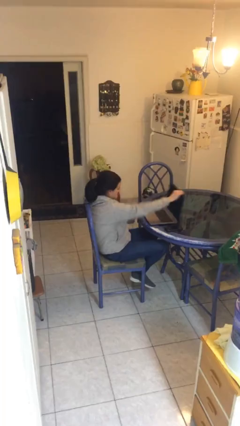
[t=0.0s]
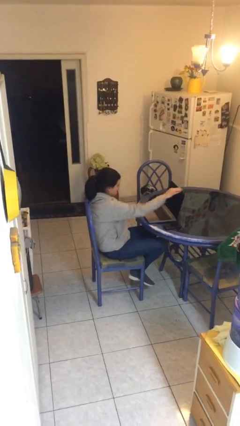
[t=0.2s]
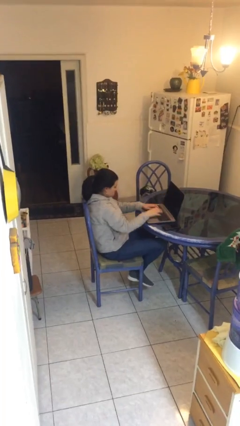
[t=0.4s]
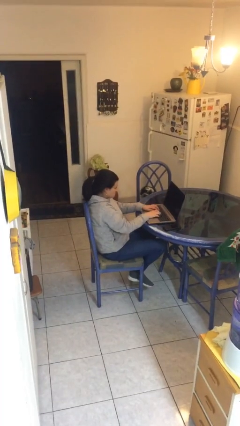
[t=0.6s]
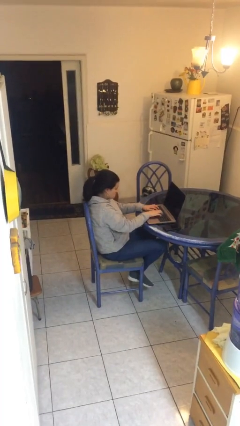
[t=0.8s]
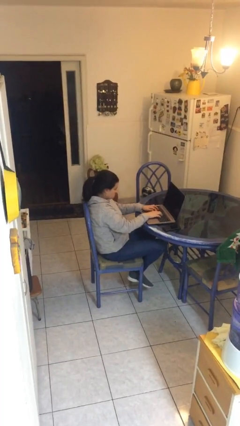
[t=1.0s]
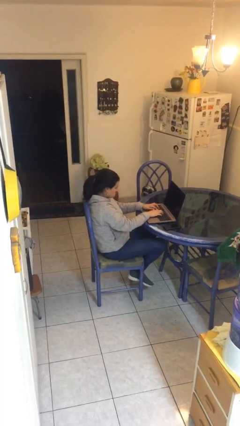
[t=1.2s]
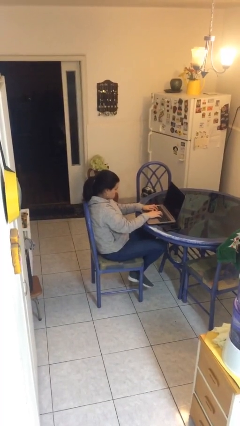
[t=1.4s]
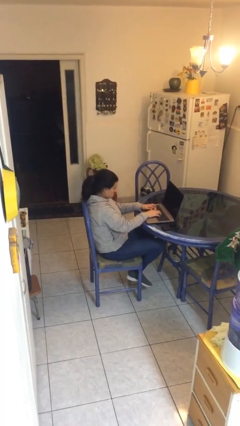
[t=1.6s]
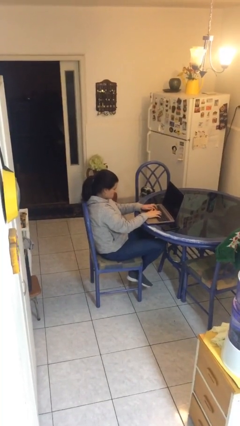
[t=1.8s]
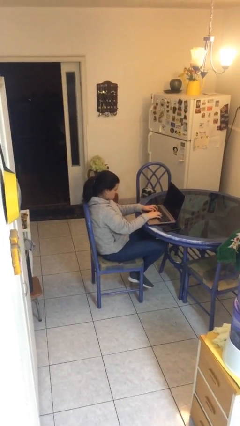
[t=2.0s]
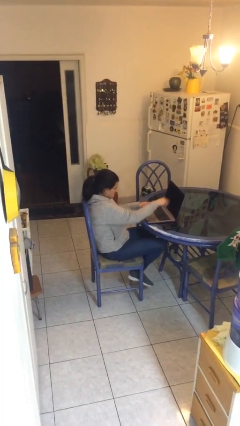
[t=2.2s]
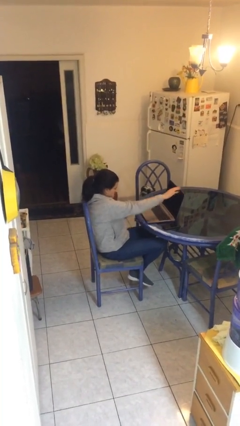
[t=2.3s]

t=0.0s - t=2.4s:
person interacts with laptop

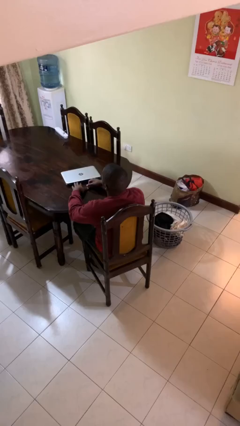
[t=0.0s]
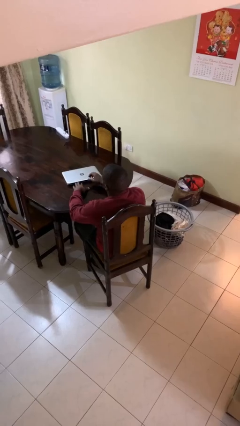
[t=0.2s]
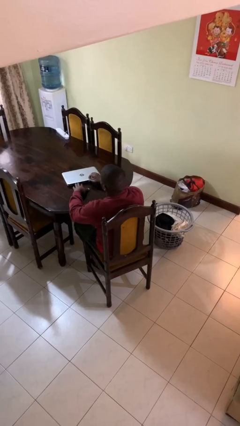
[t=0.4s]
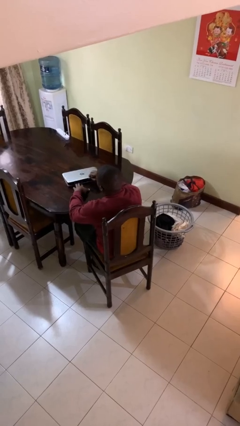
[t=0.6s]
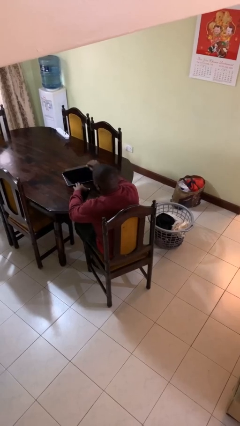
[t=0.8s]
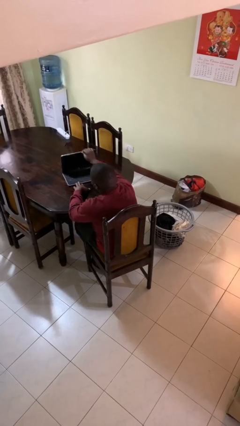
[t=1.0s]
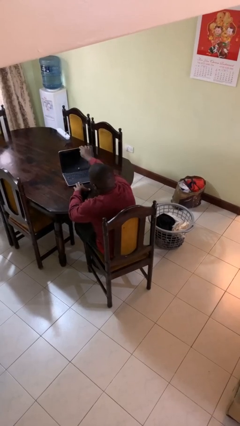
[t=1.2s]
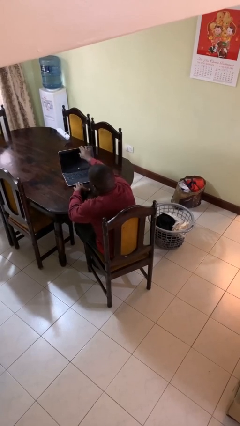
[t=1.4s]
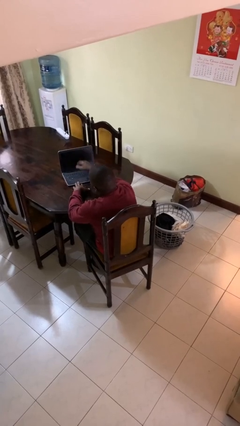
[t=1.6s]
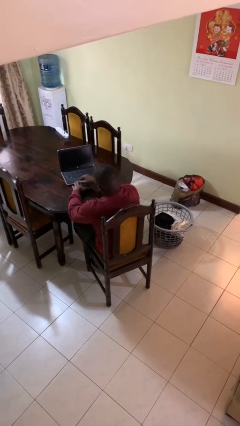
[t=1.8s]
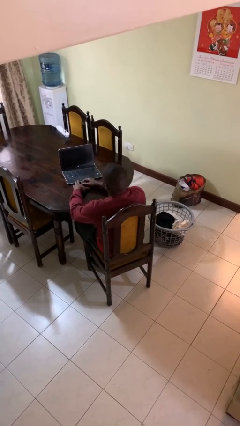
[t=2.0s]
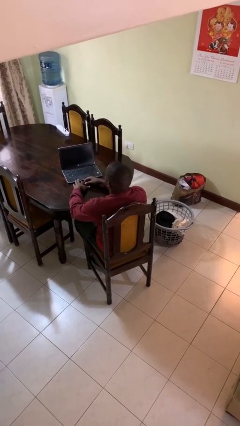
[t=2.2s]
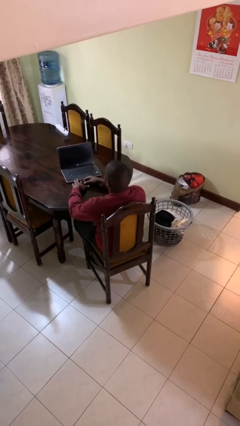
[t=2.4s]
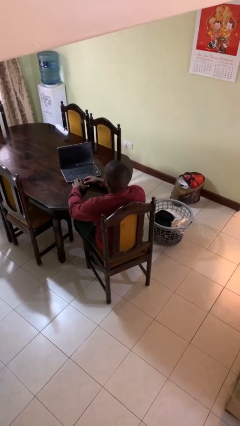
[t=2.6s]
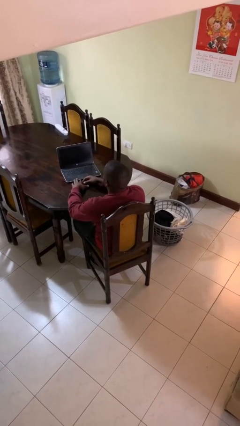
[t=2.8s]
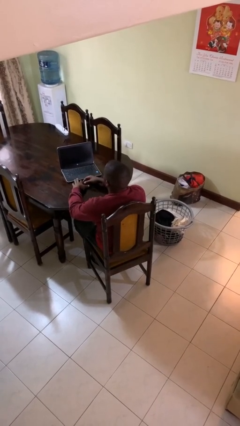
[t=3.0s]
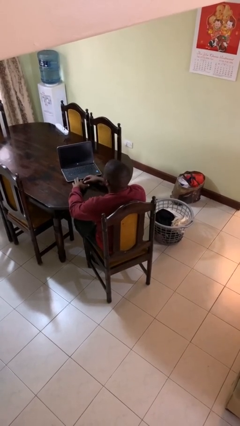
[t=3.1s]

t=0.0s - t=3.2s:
person opens laptop

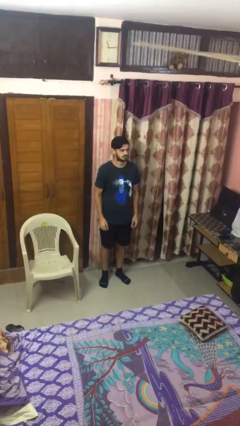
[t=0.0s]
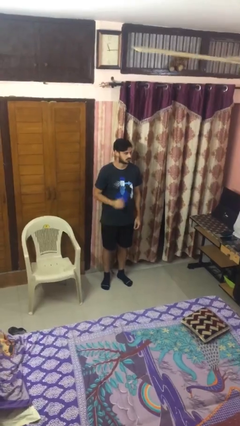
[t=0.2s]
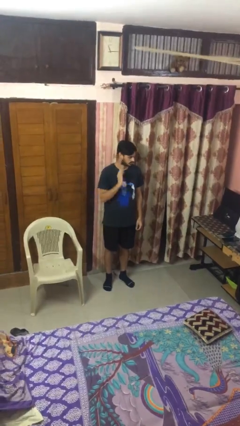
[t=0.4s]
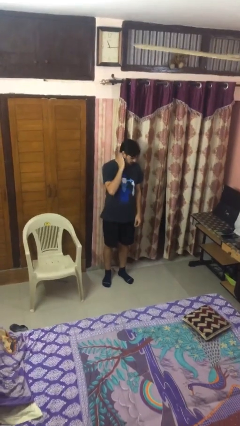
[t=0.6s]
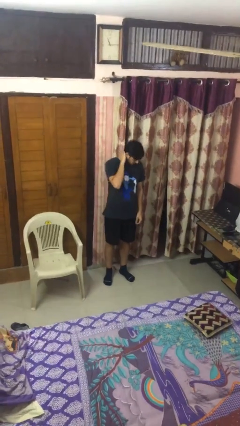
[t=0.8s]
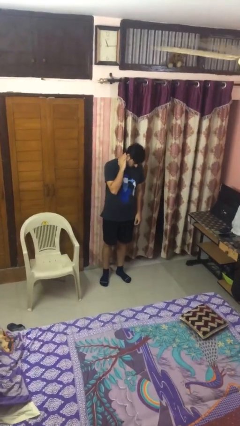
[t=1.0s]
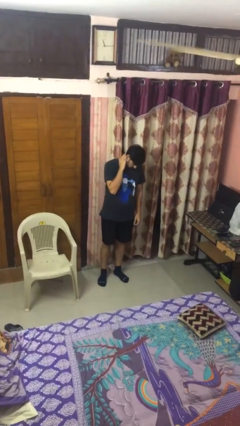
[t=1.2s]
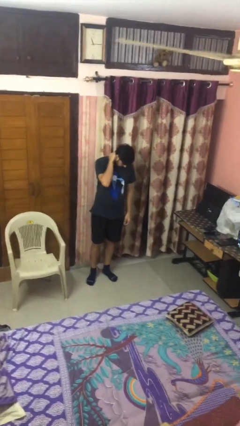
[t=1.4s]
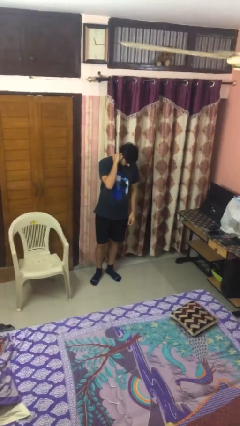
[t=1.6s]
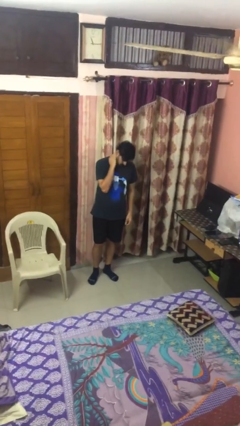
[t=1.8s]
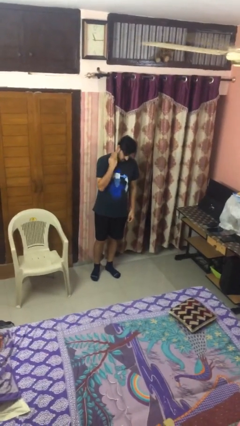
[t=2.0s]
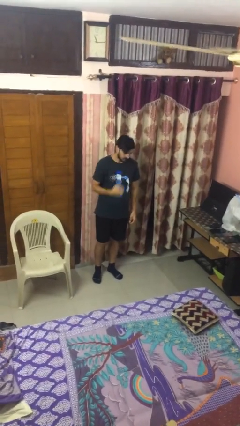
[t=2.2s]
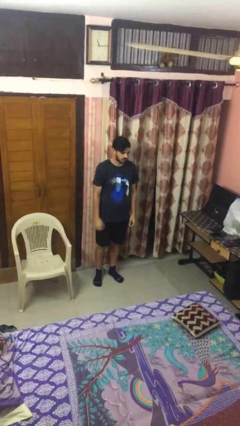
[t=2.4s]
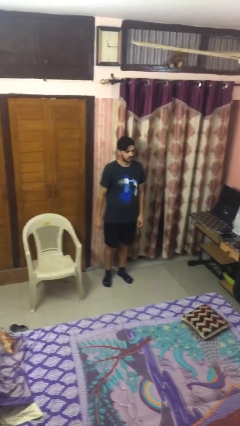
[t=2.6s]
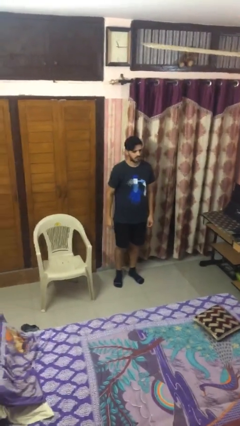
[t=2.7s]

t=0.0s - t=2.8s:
person rubs neck

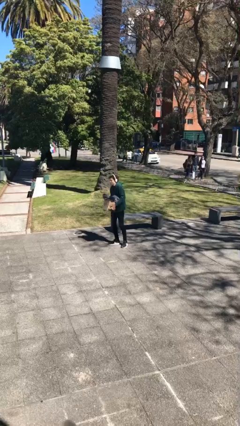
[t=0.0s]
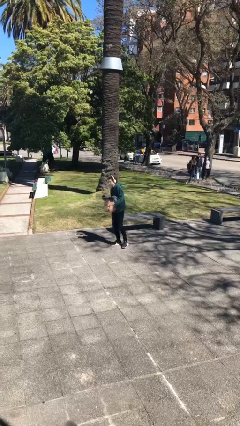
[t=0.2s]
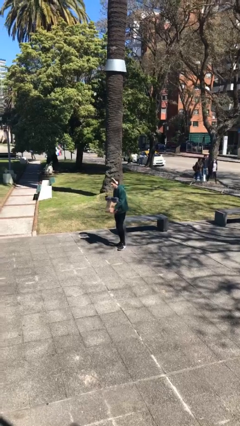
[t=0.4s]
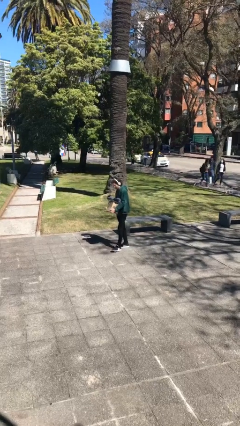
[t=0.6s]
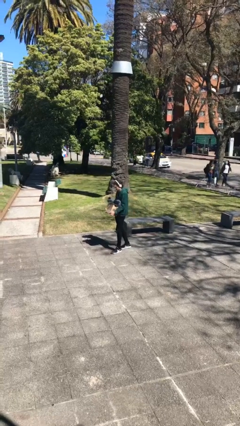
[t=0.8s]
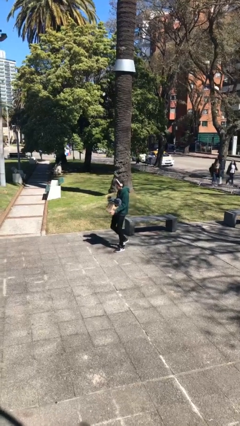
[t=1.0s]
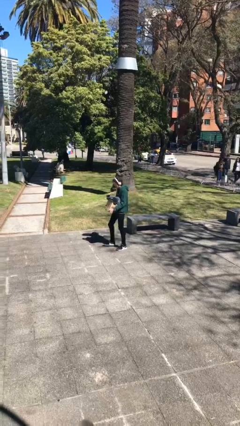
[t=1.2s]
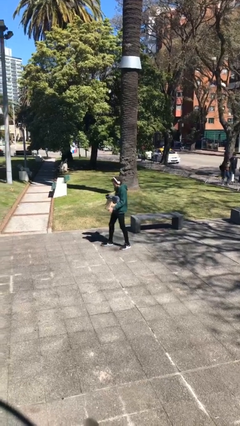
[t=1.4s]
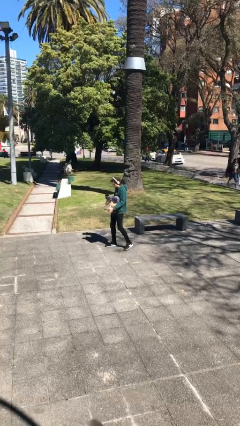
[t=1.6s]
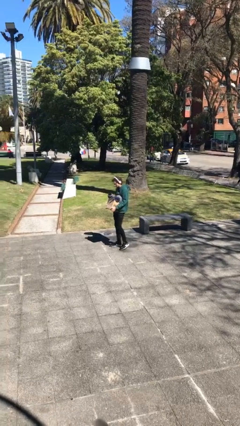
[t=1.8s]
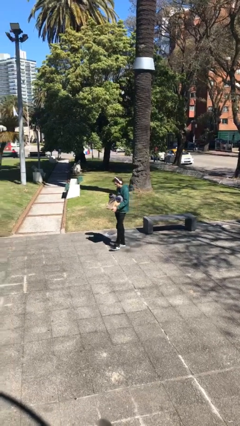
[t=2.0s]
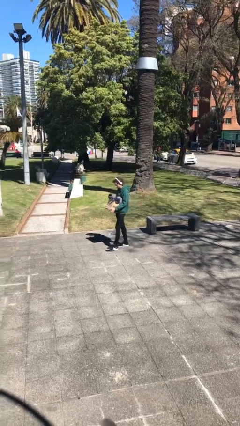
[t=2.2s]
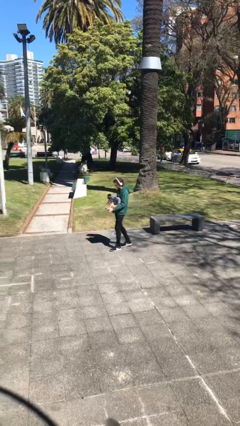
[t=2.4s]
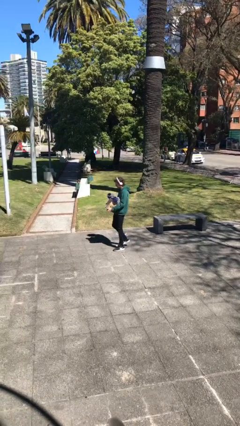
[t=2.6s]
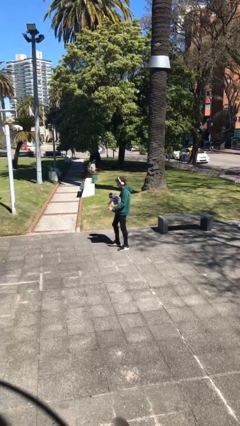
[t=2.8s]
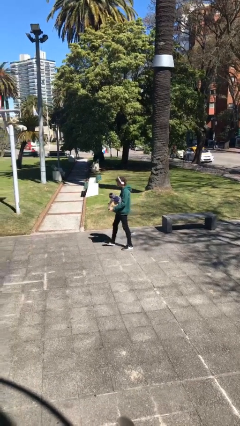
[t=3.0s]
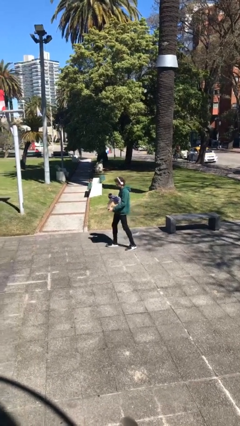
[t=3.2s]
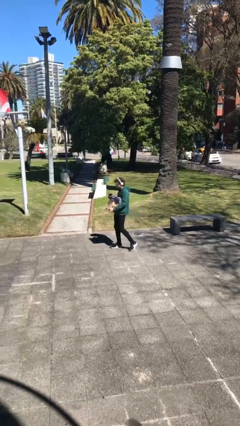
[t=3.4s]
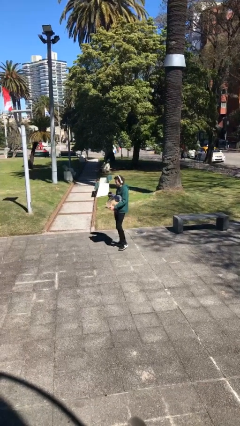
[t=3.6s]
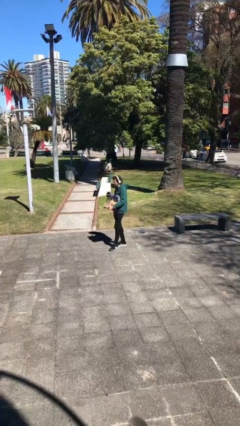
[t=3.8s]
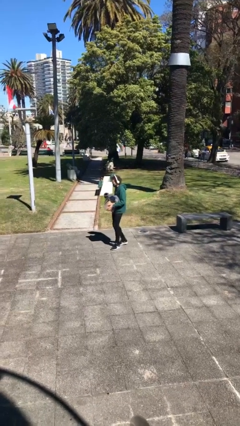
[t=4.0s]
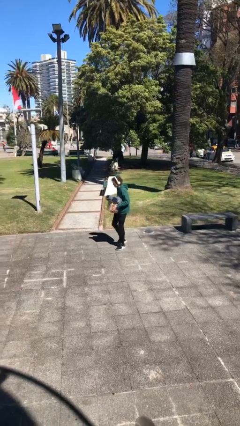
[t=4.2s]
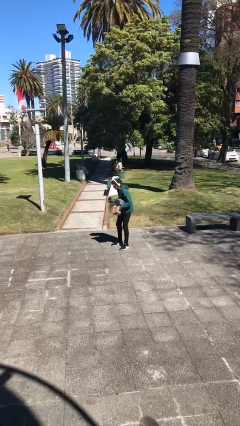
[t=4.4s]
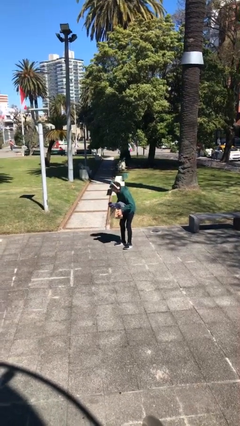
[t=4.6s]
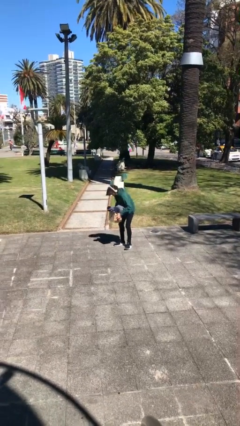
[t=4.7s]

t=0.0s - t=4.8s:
person carries heavy object

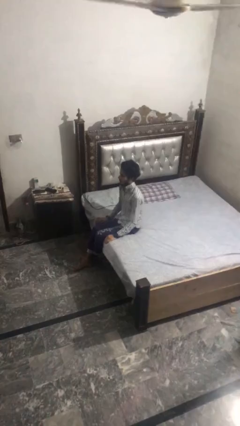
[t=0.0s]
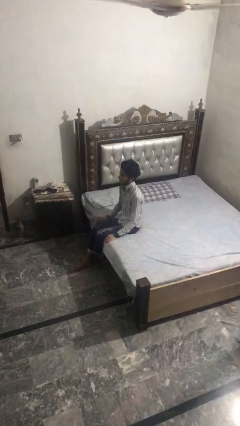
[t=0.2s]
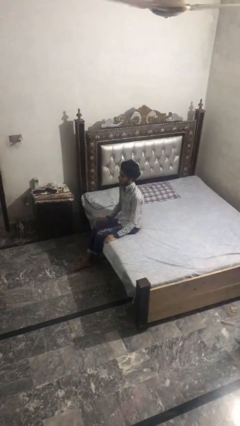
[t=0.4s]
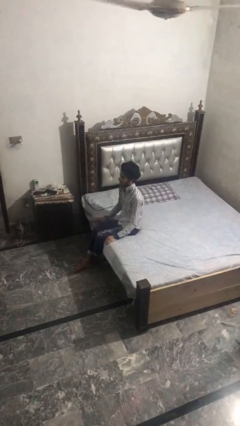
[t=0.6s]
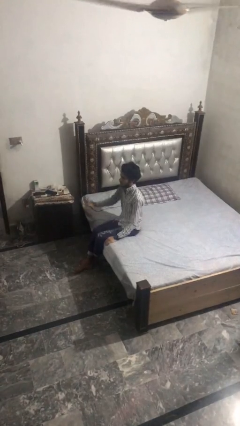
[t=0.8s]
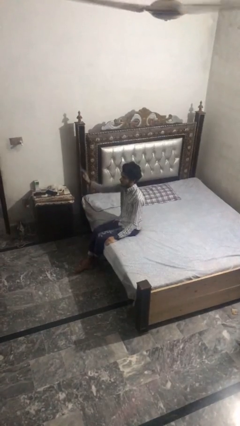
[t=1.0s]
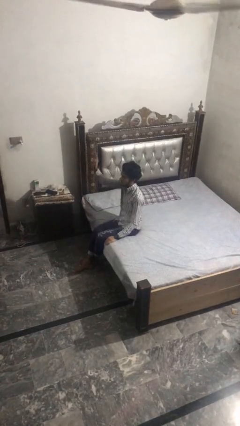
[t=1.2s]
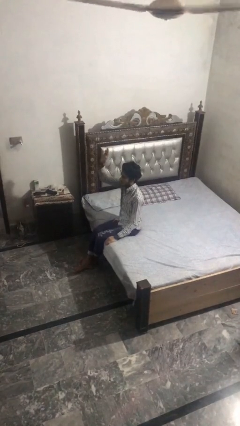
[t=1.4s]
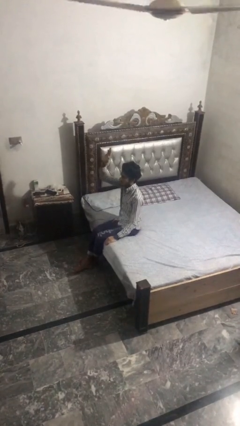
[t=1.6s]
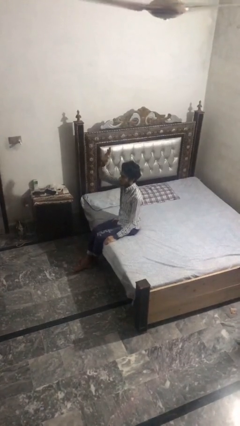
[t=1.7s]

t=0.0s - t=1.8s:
person gestures raise hand

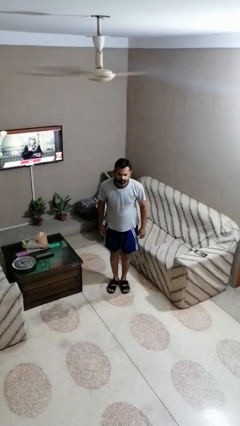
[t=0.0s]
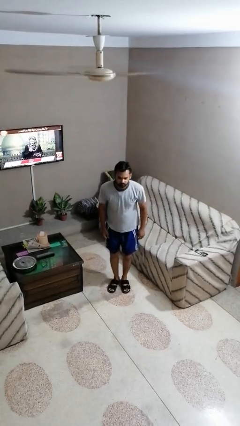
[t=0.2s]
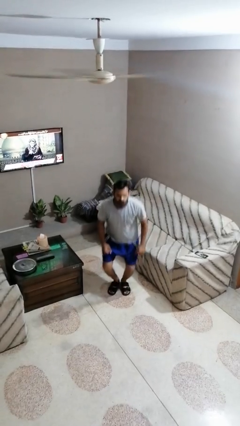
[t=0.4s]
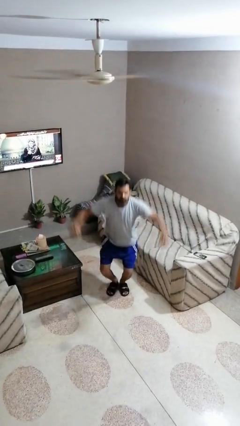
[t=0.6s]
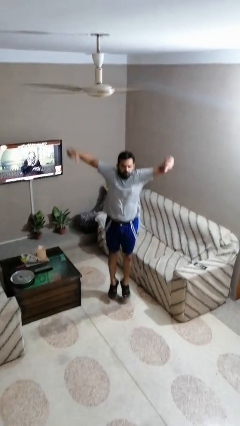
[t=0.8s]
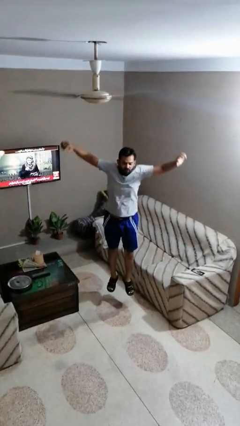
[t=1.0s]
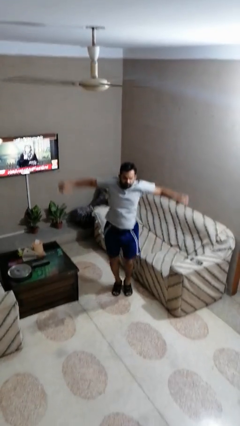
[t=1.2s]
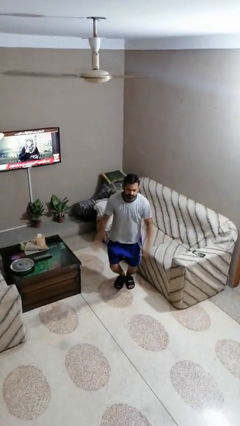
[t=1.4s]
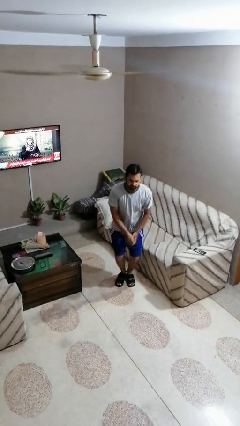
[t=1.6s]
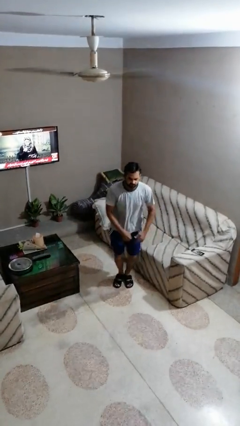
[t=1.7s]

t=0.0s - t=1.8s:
person jumps

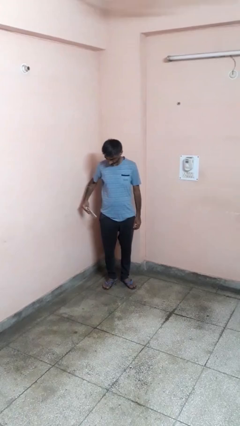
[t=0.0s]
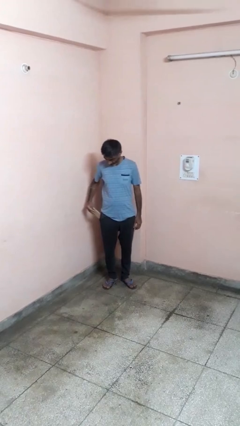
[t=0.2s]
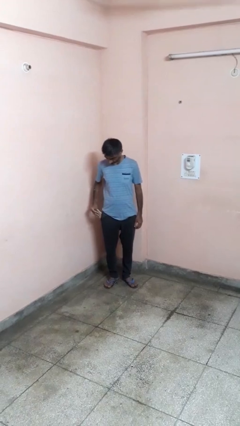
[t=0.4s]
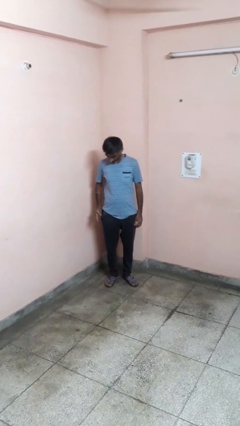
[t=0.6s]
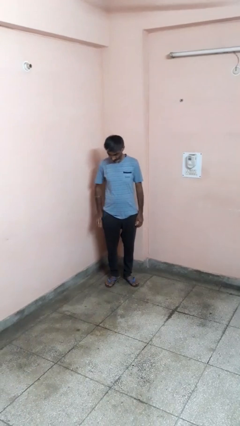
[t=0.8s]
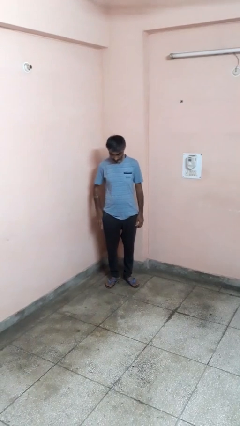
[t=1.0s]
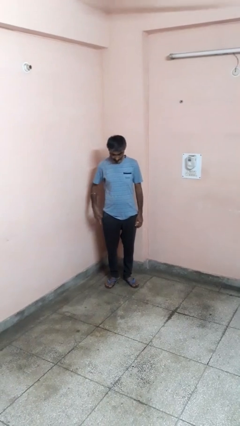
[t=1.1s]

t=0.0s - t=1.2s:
person puts phone into pocket
